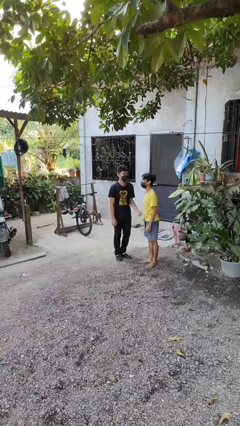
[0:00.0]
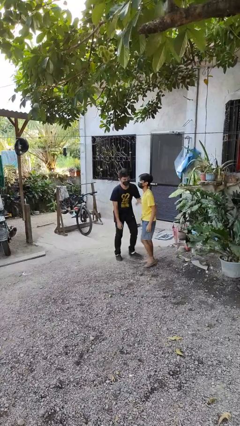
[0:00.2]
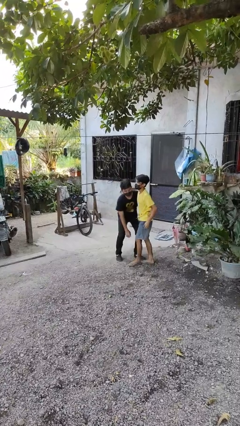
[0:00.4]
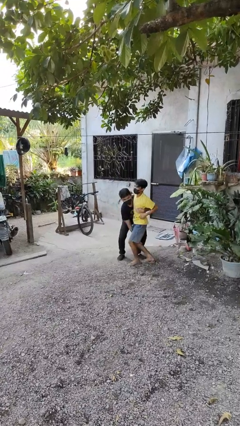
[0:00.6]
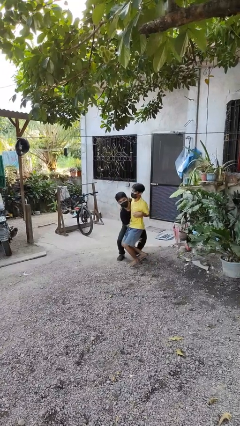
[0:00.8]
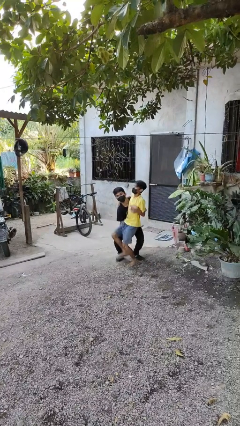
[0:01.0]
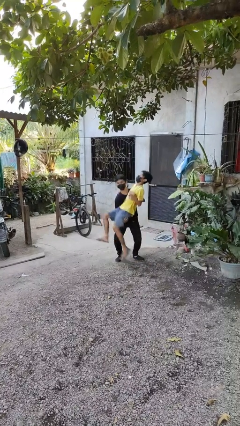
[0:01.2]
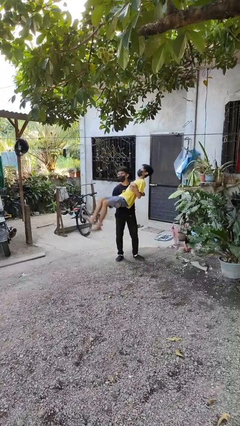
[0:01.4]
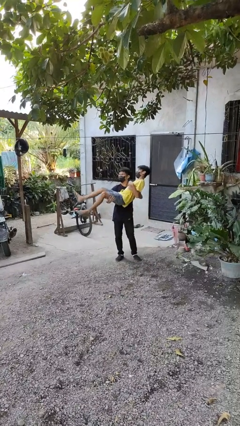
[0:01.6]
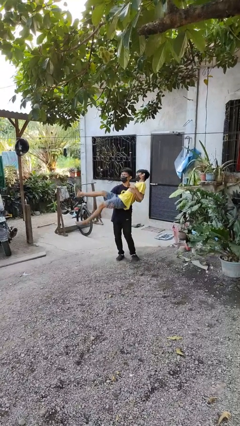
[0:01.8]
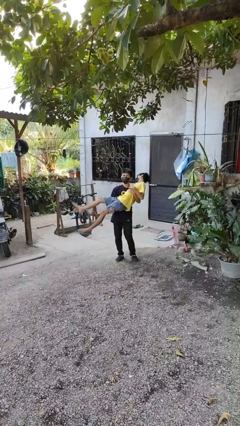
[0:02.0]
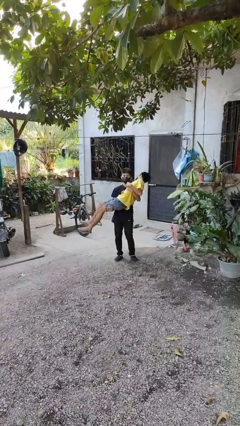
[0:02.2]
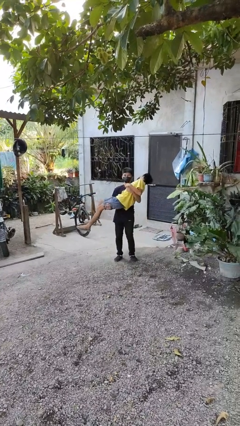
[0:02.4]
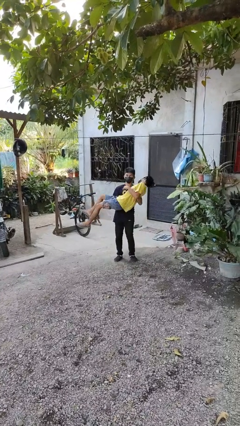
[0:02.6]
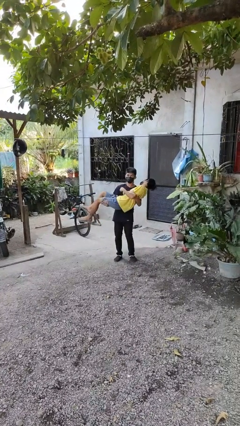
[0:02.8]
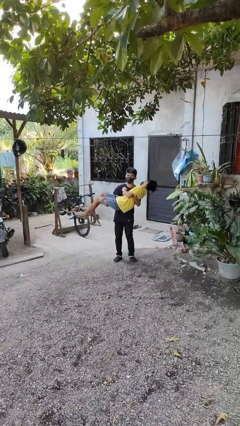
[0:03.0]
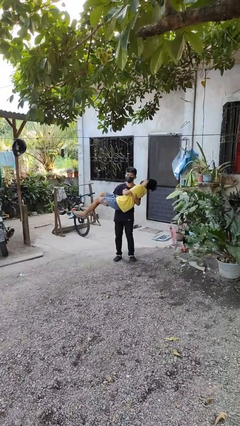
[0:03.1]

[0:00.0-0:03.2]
person picks up person

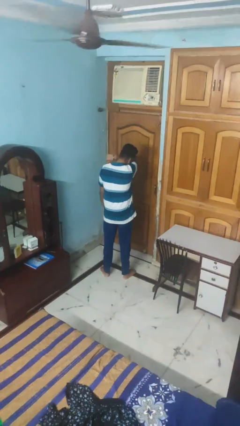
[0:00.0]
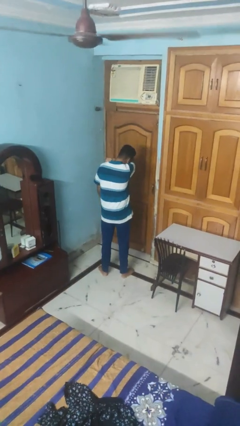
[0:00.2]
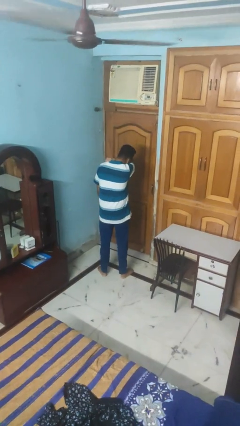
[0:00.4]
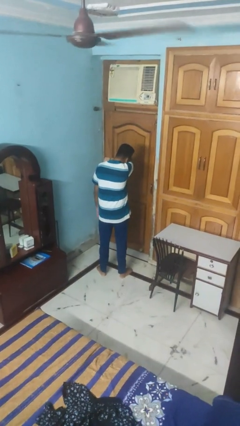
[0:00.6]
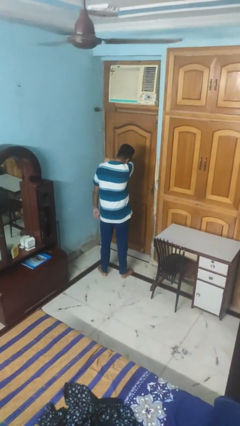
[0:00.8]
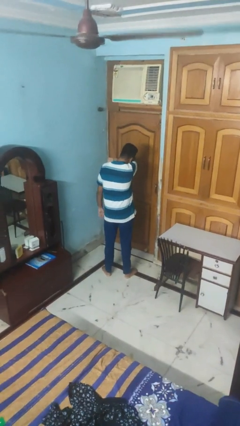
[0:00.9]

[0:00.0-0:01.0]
person sneezes into arm

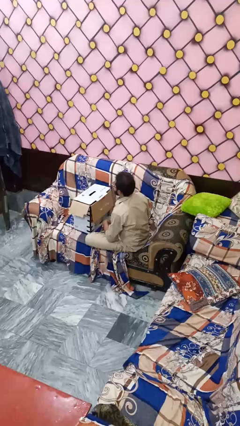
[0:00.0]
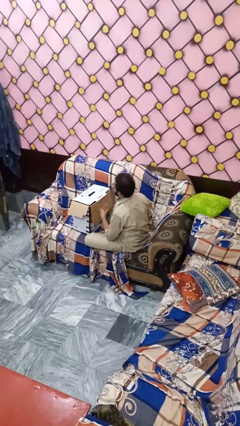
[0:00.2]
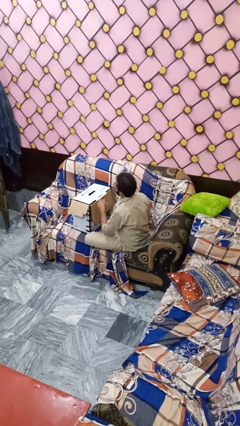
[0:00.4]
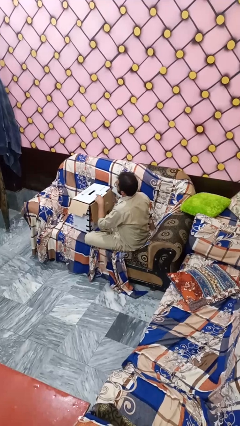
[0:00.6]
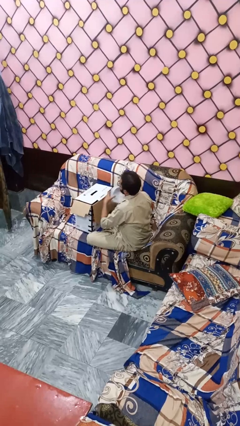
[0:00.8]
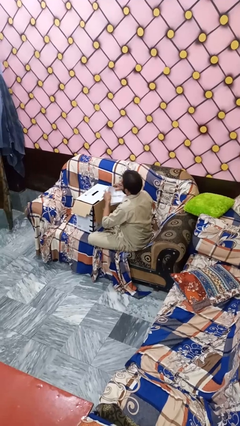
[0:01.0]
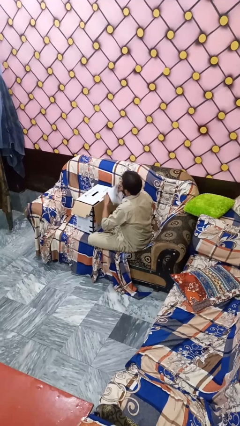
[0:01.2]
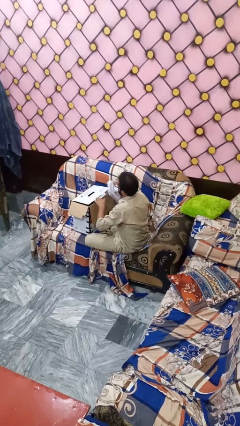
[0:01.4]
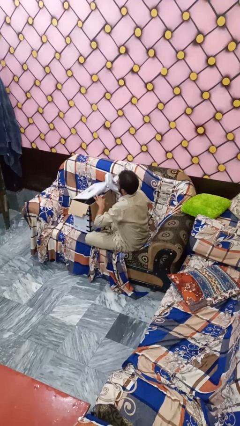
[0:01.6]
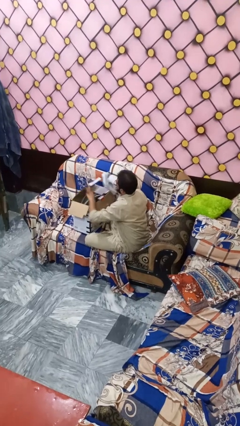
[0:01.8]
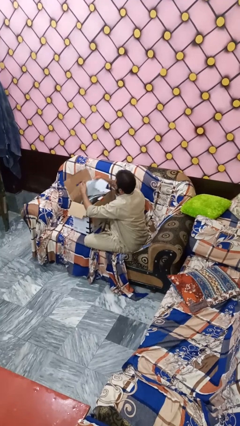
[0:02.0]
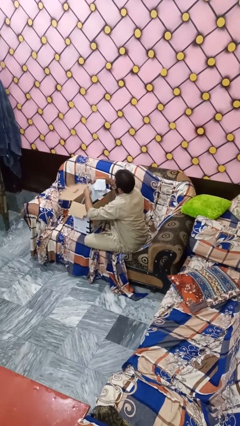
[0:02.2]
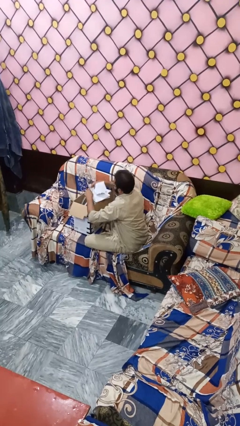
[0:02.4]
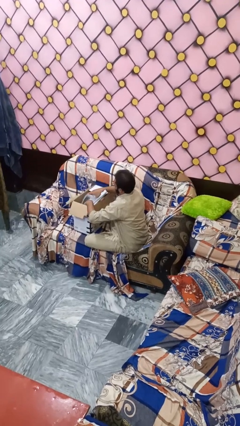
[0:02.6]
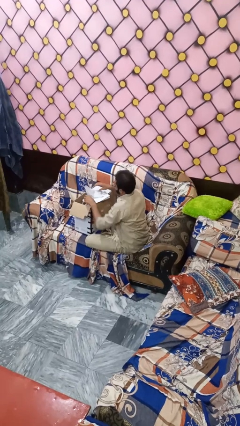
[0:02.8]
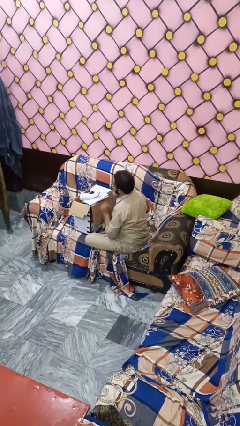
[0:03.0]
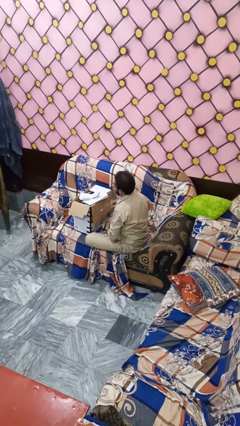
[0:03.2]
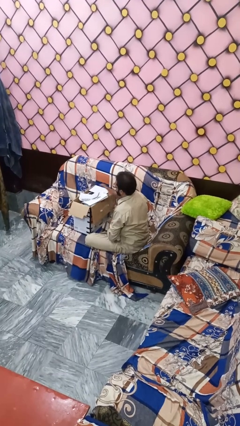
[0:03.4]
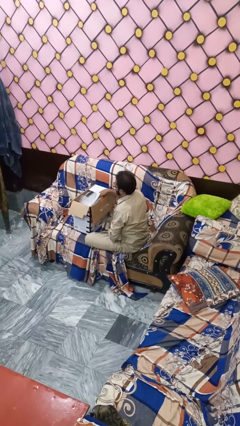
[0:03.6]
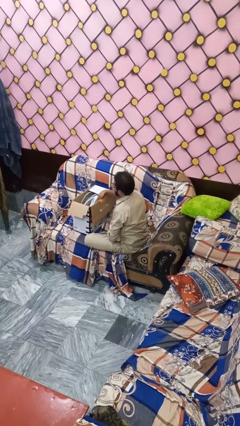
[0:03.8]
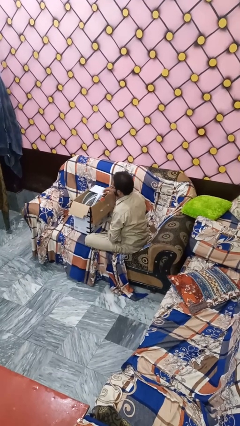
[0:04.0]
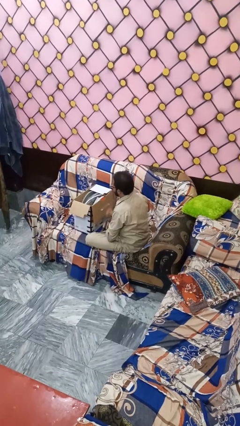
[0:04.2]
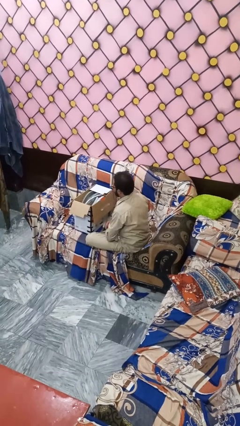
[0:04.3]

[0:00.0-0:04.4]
person wraps box

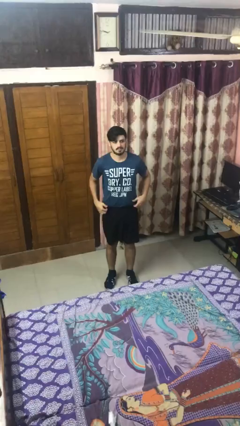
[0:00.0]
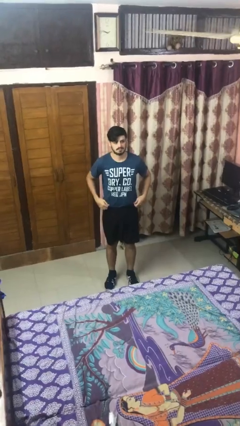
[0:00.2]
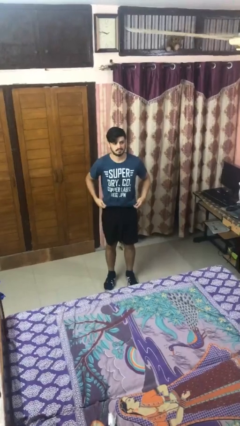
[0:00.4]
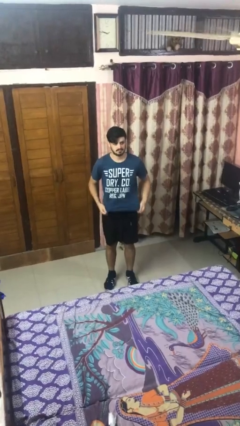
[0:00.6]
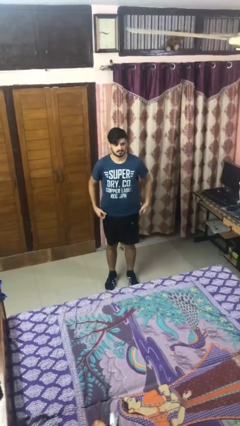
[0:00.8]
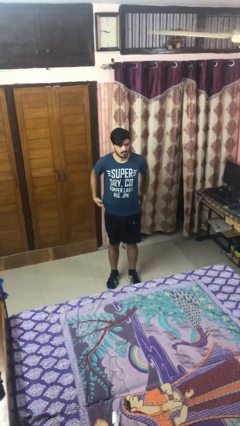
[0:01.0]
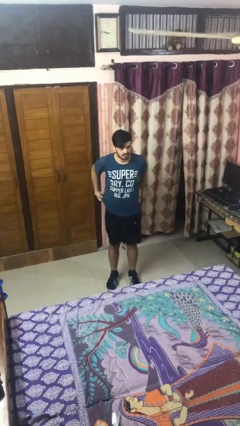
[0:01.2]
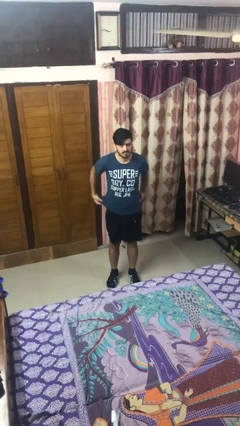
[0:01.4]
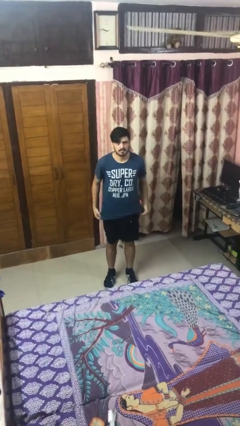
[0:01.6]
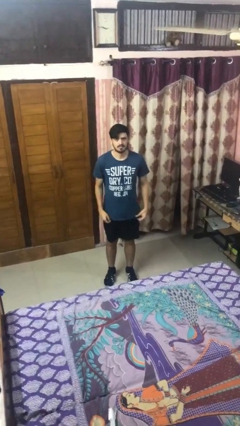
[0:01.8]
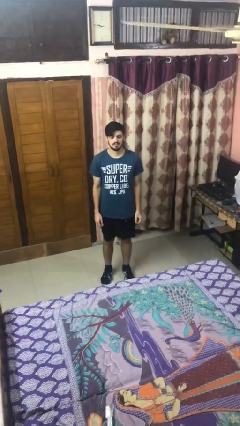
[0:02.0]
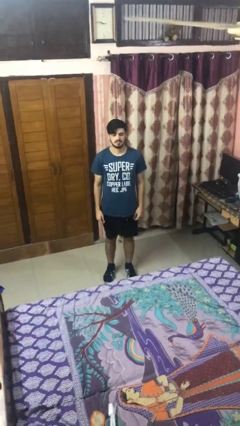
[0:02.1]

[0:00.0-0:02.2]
person untucks shirt

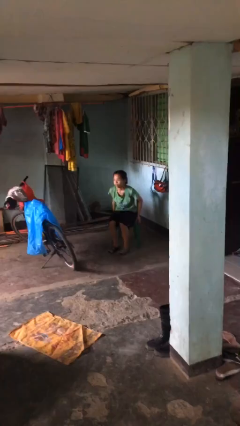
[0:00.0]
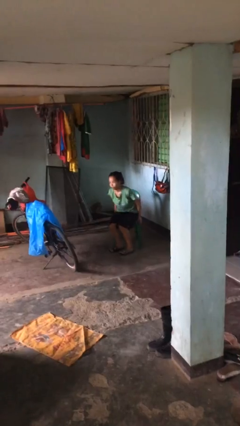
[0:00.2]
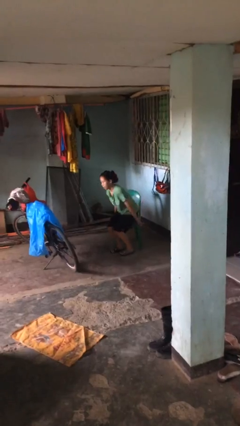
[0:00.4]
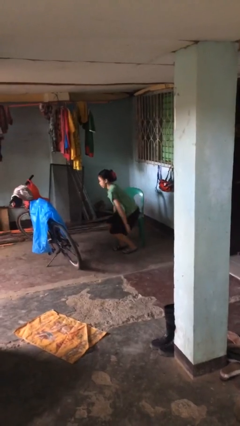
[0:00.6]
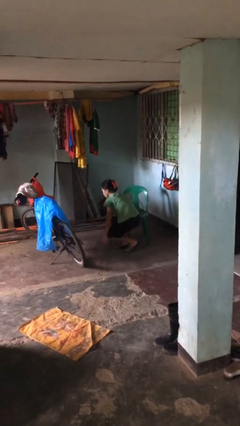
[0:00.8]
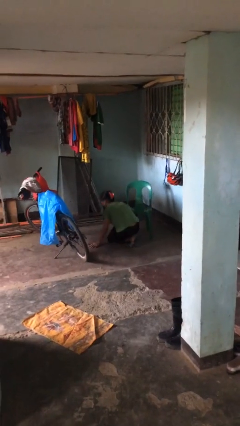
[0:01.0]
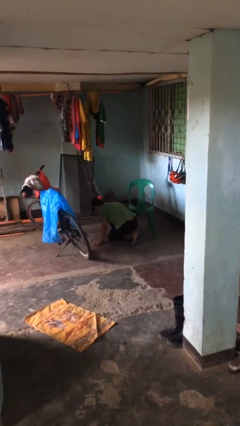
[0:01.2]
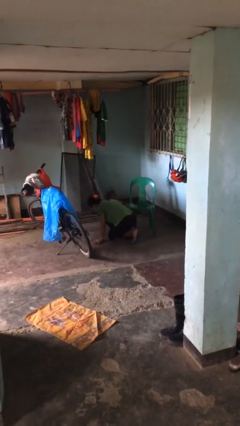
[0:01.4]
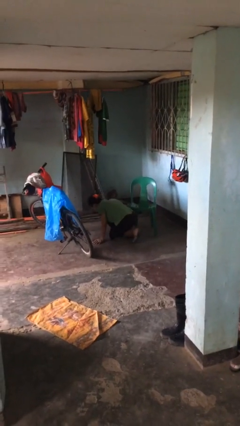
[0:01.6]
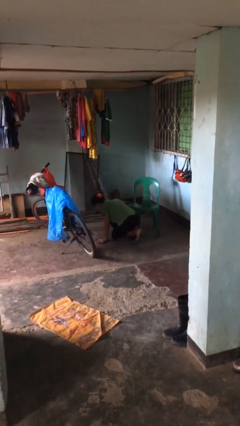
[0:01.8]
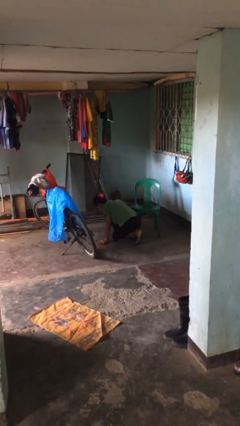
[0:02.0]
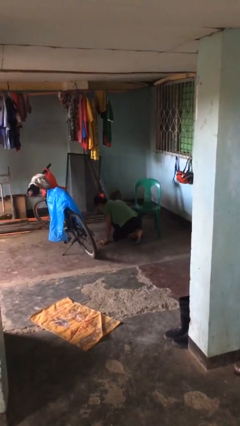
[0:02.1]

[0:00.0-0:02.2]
person falls from chair

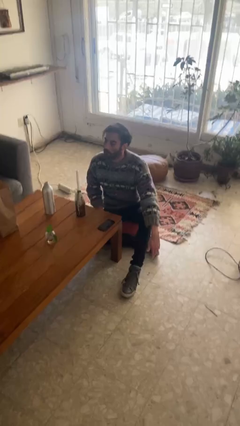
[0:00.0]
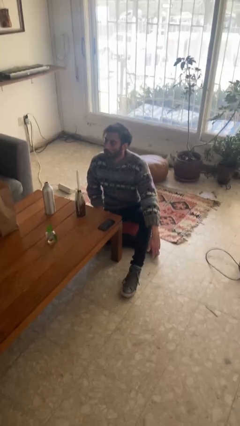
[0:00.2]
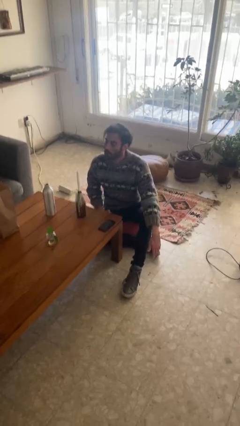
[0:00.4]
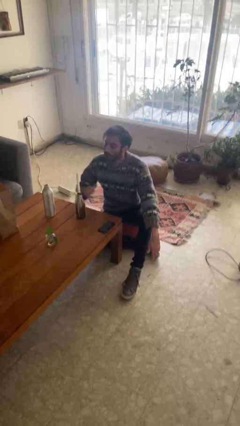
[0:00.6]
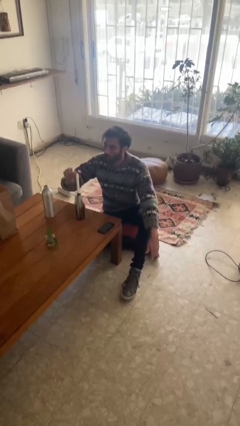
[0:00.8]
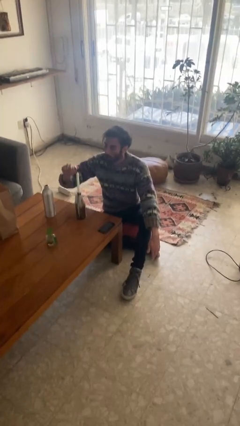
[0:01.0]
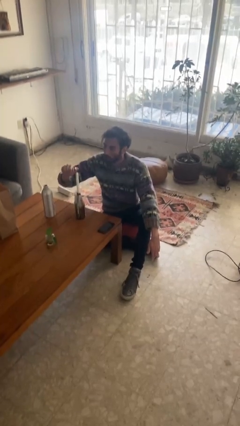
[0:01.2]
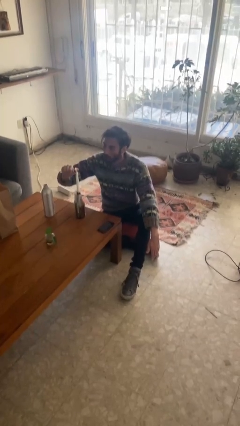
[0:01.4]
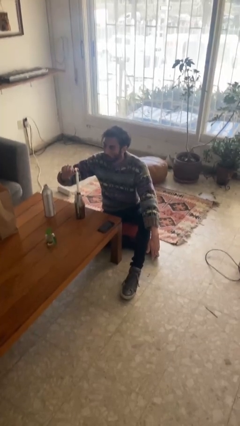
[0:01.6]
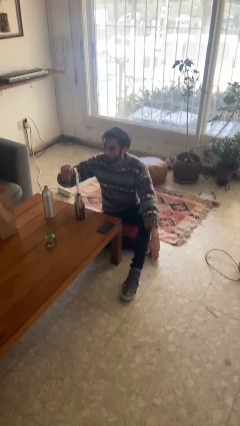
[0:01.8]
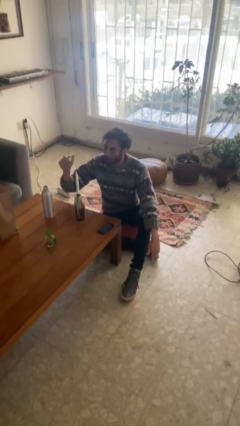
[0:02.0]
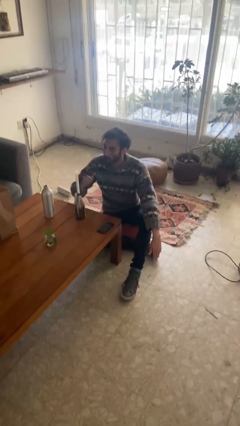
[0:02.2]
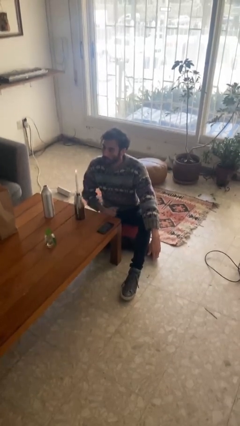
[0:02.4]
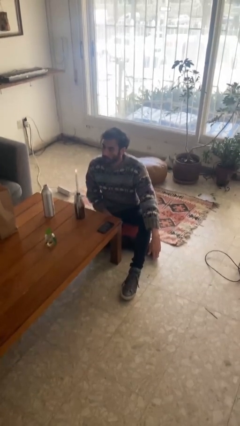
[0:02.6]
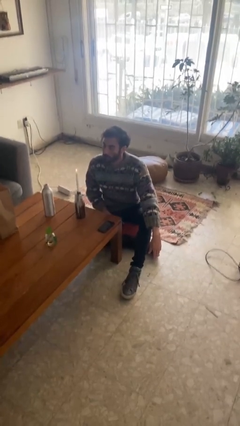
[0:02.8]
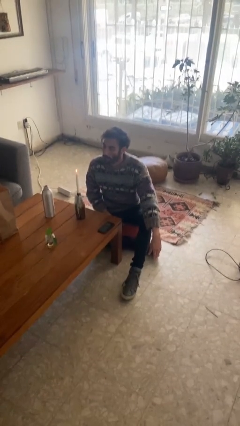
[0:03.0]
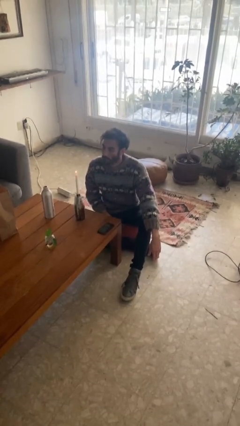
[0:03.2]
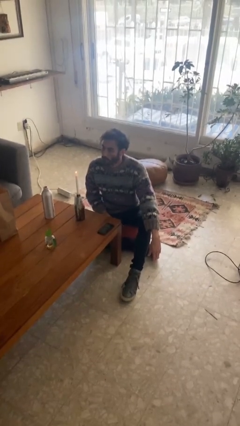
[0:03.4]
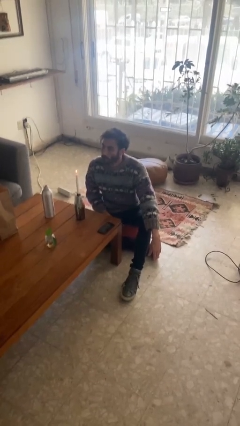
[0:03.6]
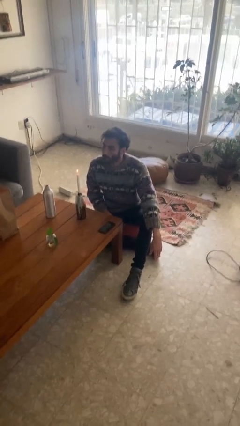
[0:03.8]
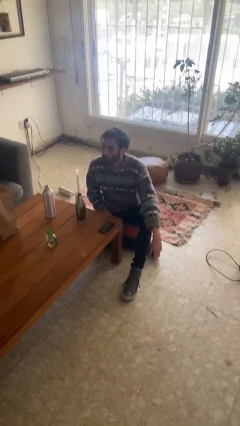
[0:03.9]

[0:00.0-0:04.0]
person lights candle

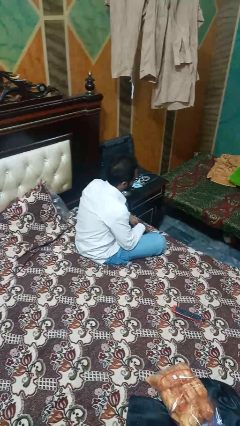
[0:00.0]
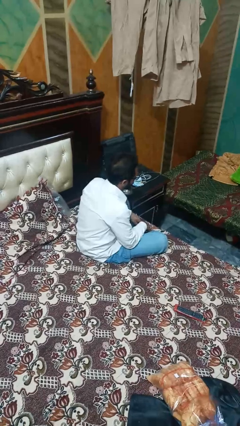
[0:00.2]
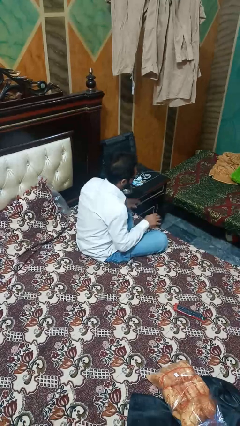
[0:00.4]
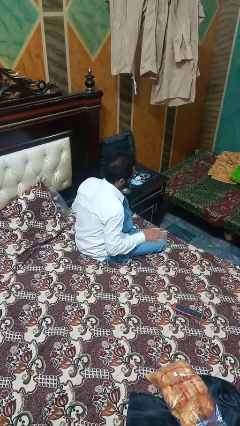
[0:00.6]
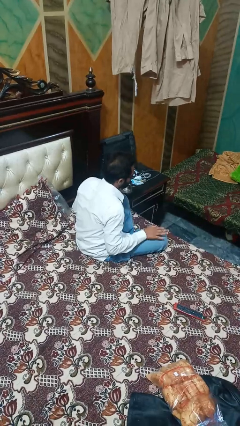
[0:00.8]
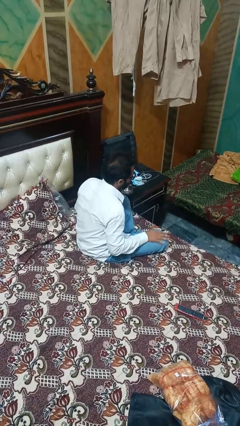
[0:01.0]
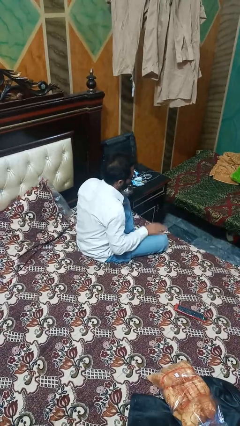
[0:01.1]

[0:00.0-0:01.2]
person slaps hands on thighs
